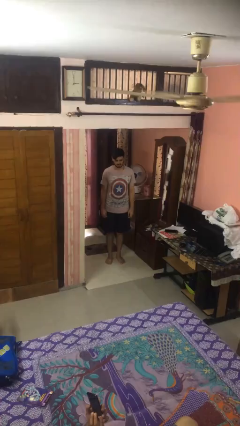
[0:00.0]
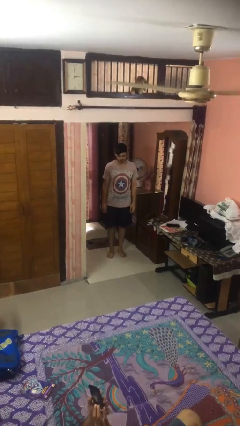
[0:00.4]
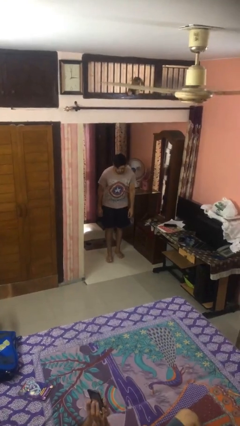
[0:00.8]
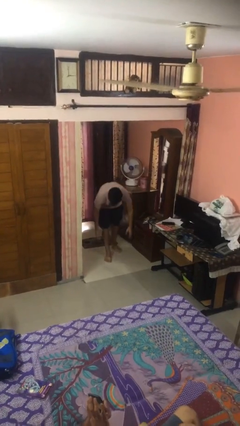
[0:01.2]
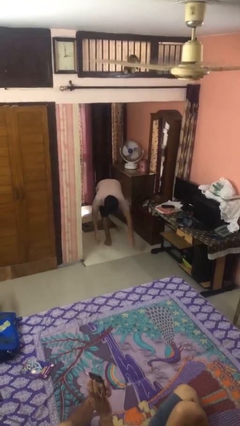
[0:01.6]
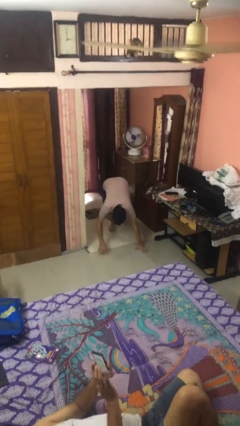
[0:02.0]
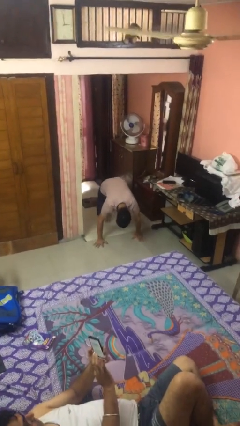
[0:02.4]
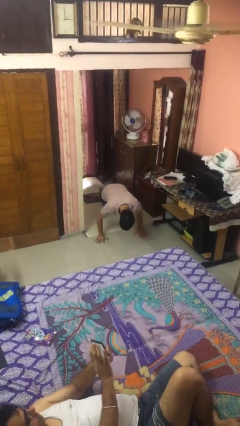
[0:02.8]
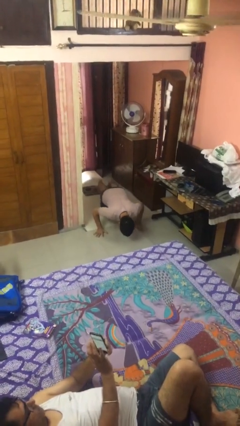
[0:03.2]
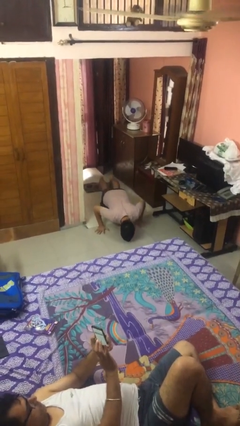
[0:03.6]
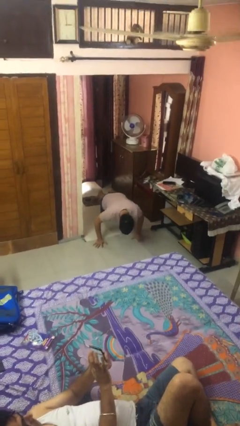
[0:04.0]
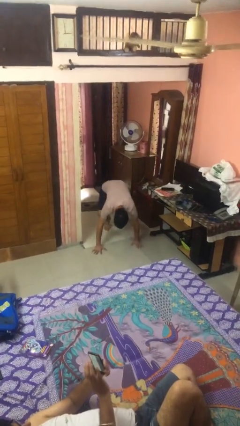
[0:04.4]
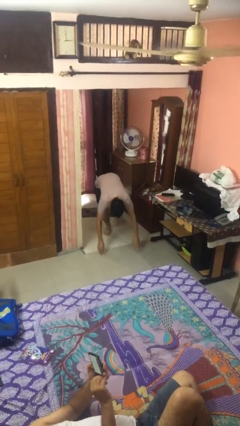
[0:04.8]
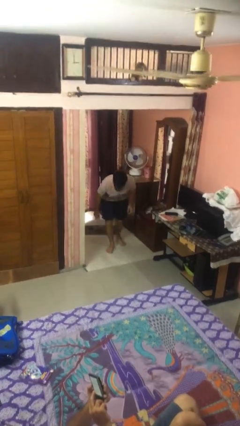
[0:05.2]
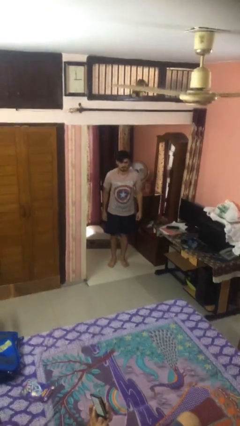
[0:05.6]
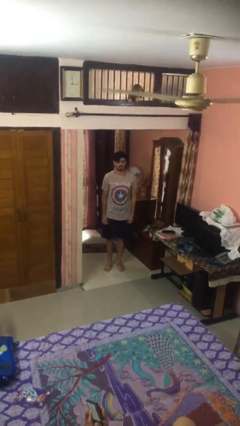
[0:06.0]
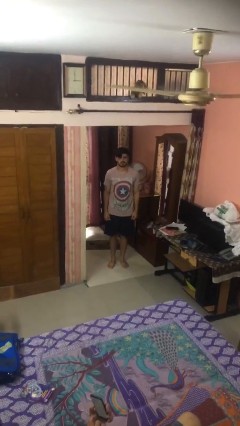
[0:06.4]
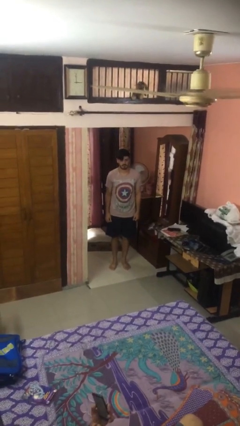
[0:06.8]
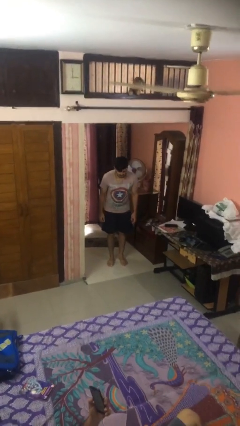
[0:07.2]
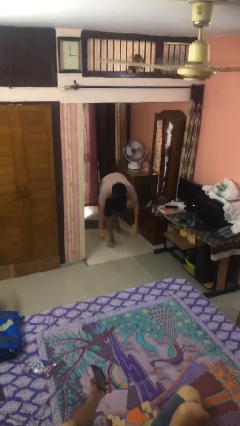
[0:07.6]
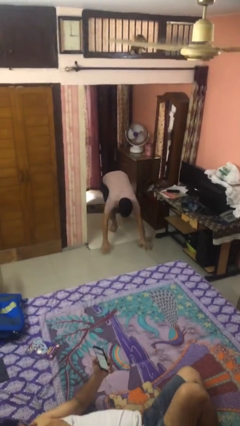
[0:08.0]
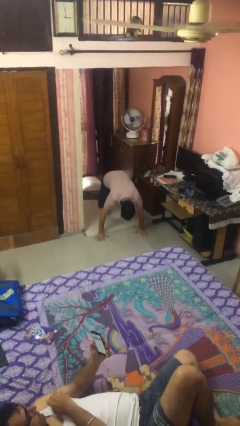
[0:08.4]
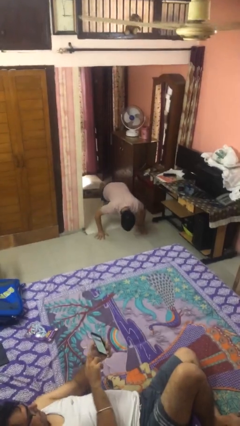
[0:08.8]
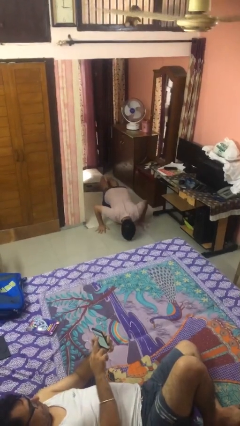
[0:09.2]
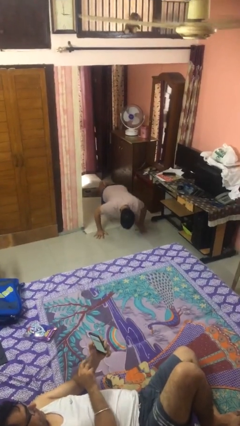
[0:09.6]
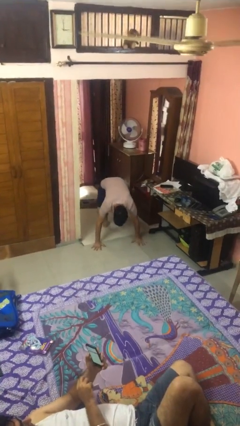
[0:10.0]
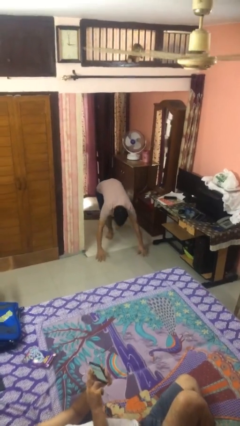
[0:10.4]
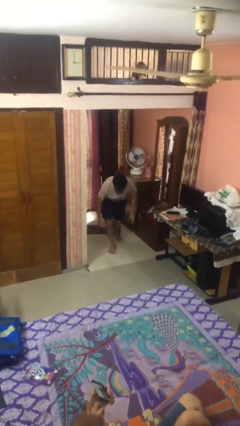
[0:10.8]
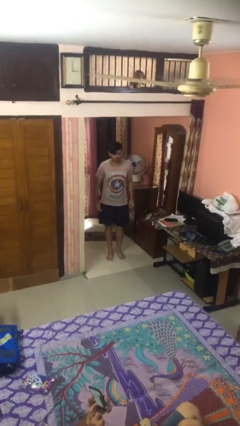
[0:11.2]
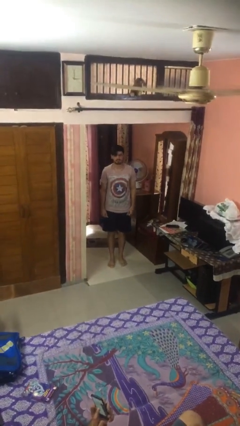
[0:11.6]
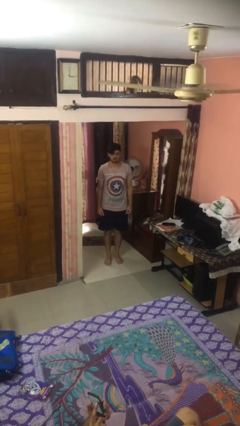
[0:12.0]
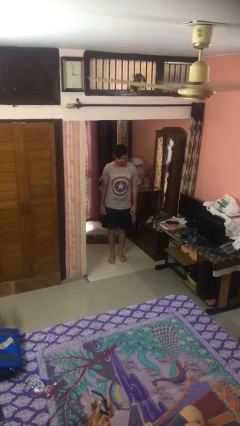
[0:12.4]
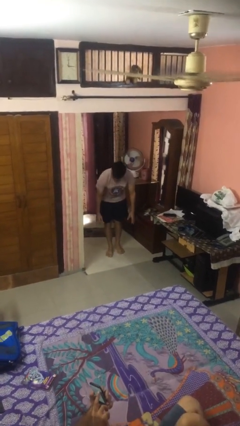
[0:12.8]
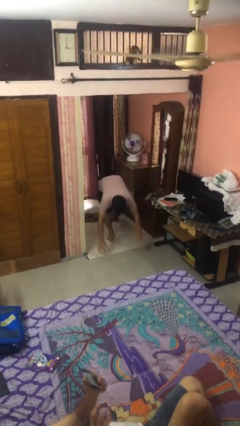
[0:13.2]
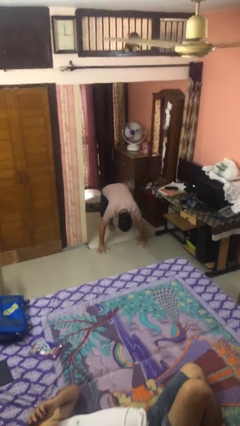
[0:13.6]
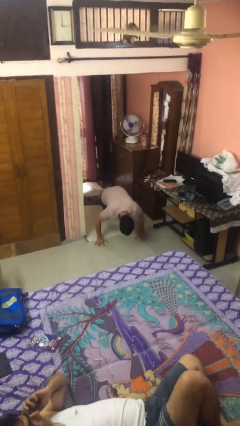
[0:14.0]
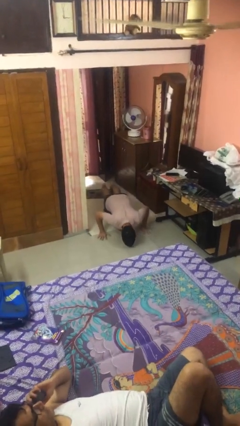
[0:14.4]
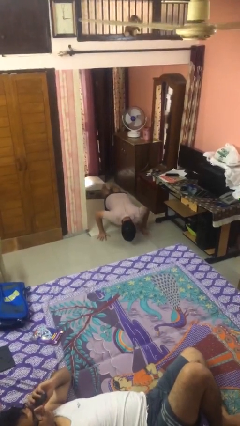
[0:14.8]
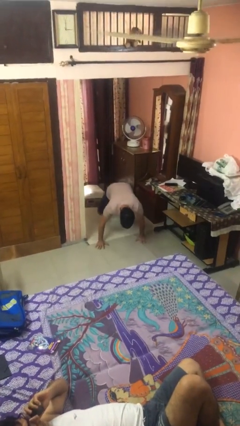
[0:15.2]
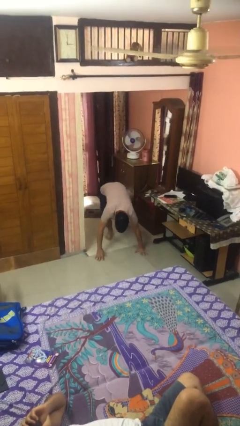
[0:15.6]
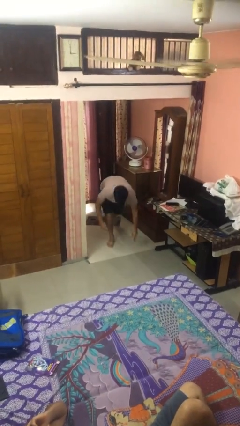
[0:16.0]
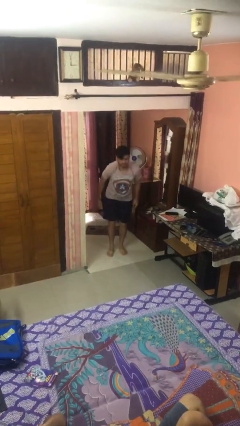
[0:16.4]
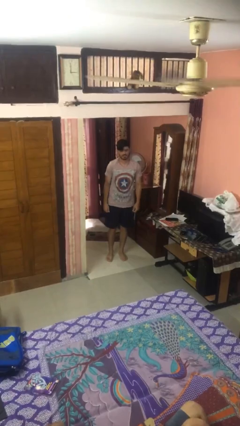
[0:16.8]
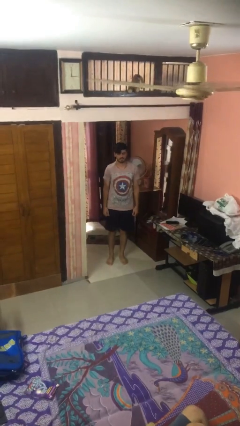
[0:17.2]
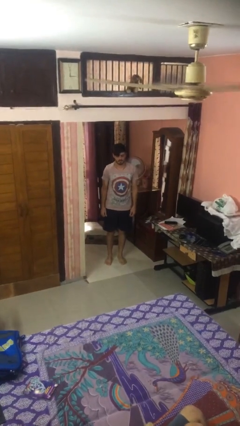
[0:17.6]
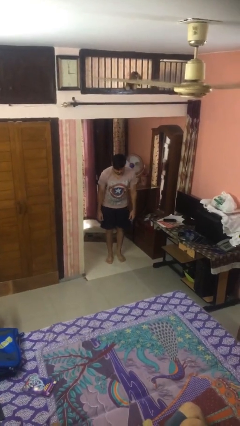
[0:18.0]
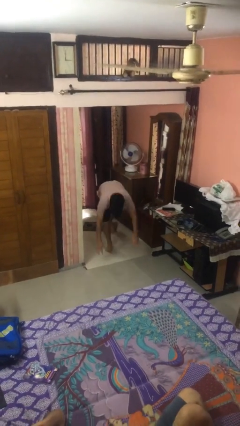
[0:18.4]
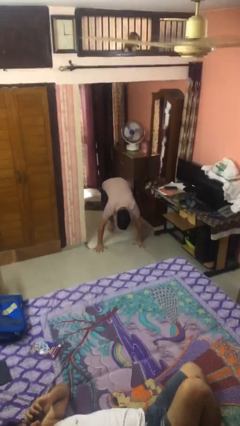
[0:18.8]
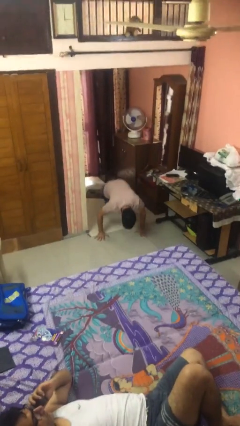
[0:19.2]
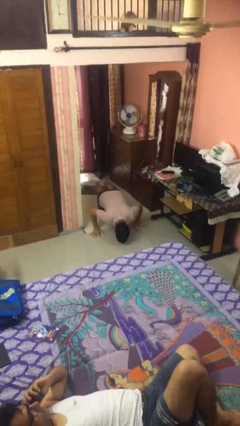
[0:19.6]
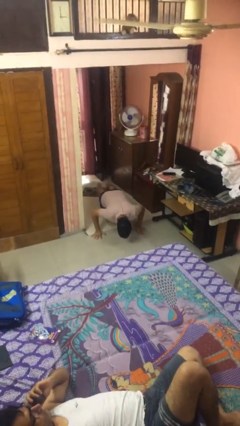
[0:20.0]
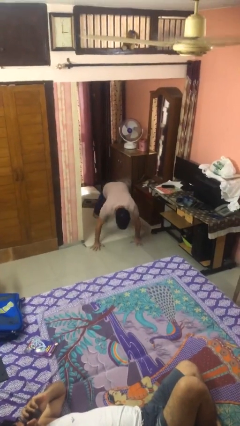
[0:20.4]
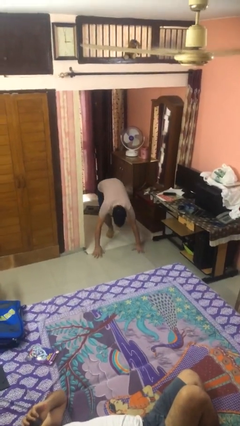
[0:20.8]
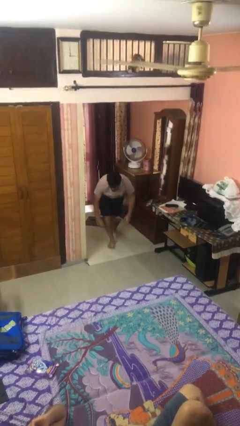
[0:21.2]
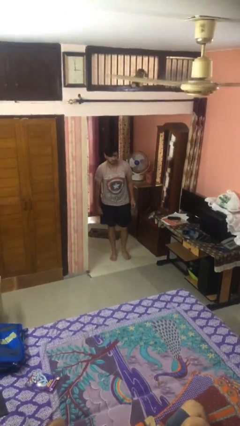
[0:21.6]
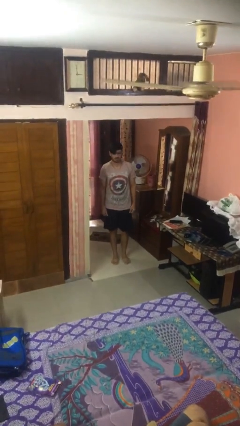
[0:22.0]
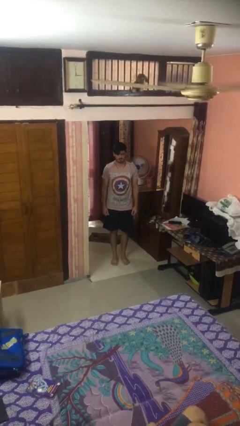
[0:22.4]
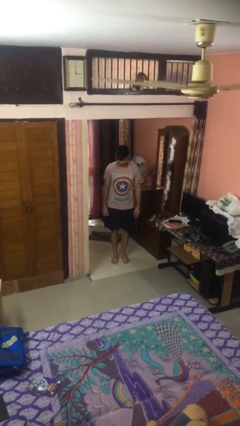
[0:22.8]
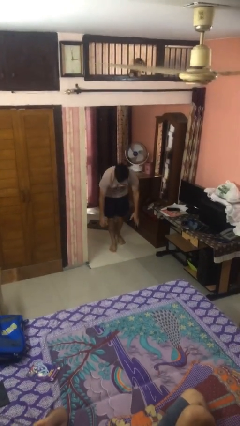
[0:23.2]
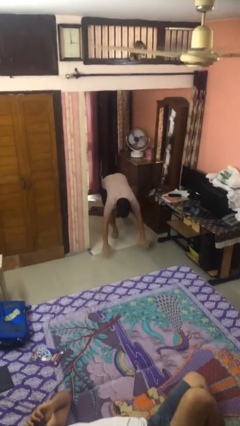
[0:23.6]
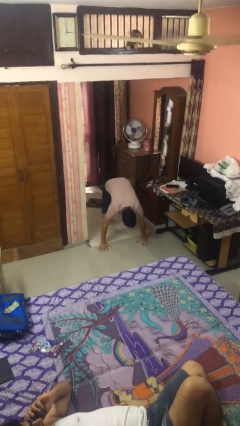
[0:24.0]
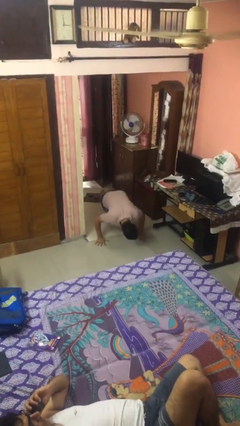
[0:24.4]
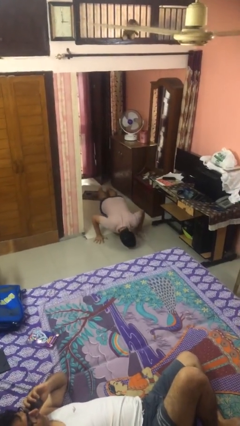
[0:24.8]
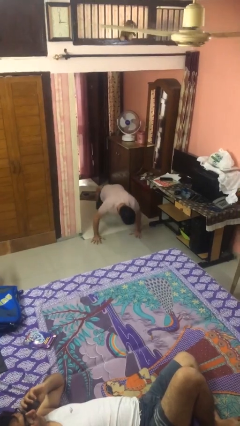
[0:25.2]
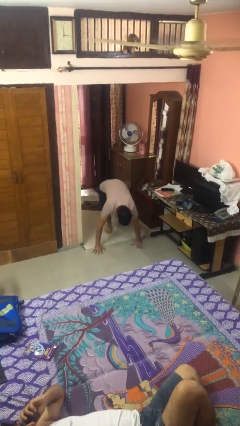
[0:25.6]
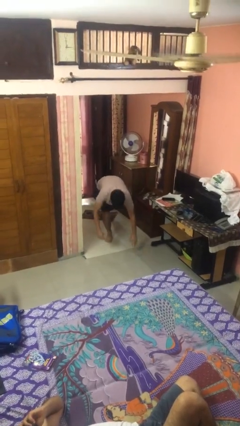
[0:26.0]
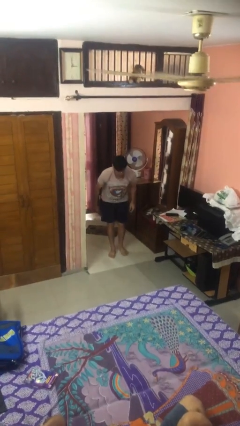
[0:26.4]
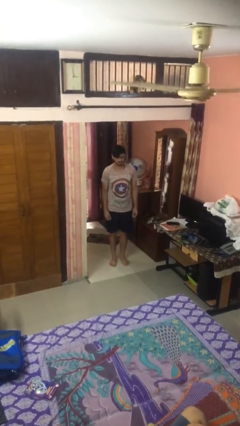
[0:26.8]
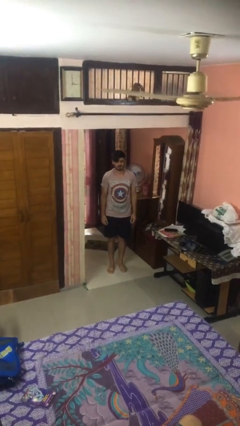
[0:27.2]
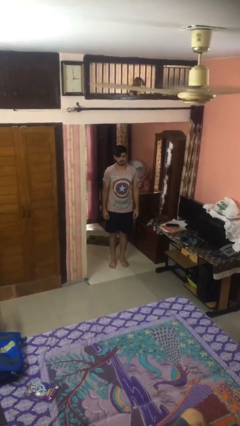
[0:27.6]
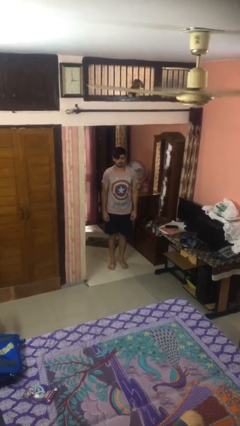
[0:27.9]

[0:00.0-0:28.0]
person exercises with pushup

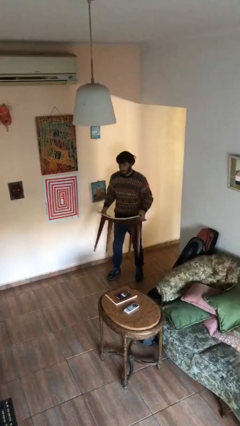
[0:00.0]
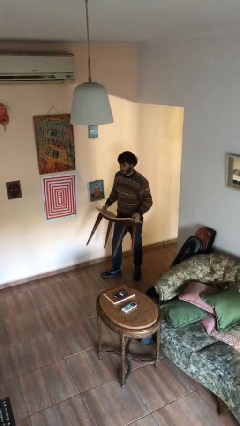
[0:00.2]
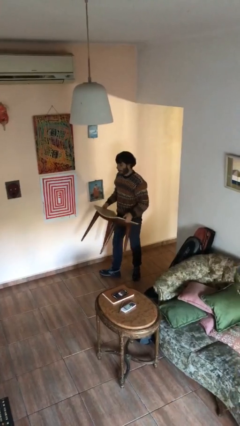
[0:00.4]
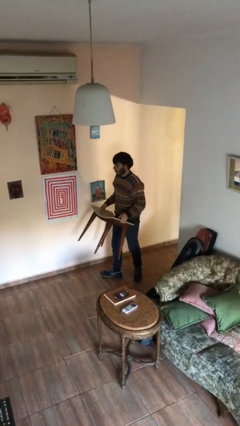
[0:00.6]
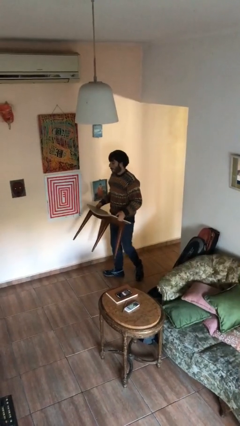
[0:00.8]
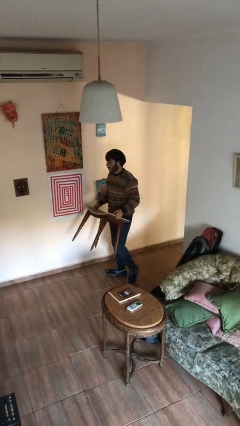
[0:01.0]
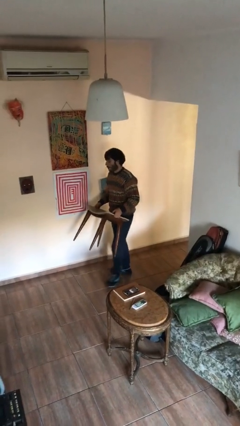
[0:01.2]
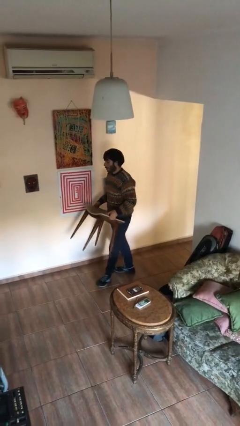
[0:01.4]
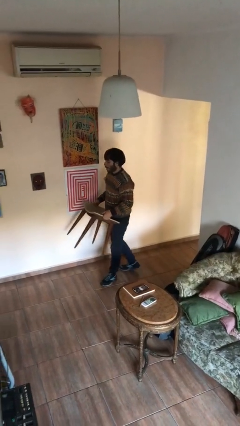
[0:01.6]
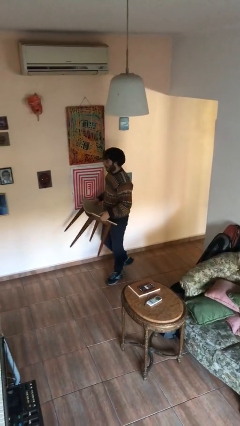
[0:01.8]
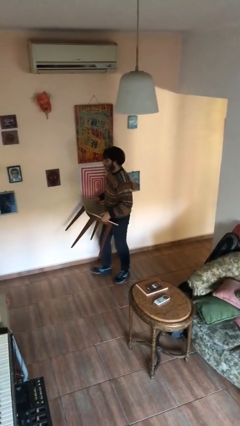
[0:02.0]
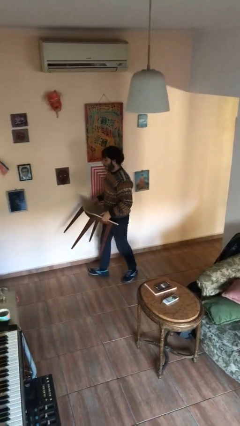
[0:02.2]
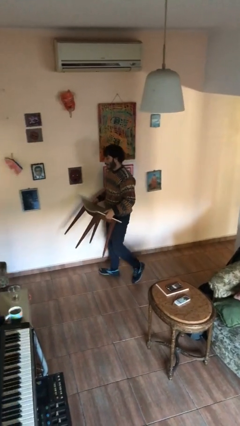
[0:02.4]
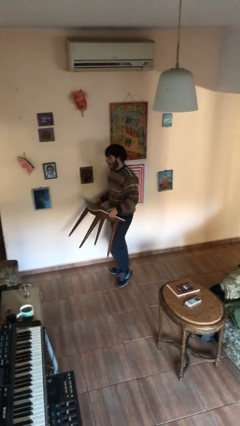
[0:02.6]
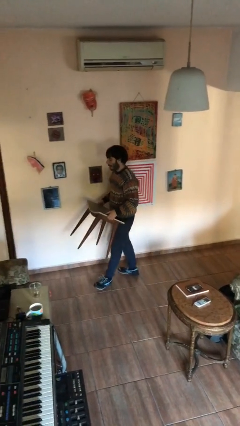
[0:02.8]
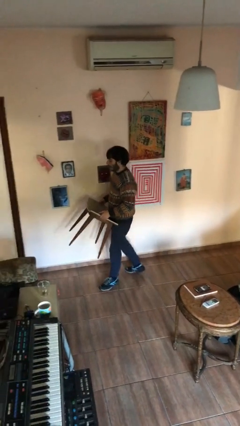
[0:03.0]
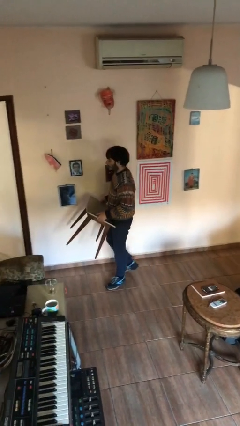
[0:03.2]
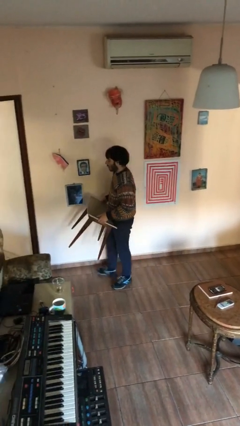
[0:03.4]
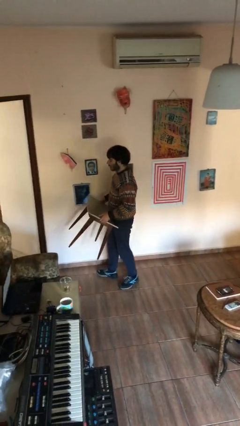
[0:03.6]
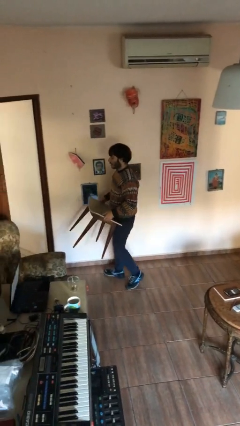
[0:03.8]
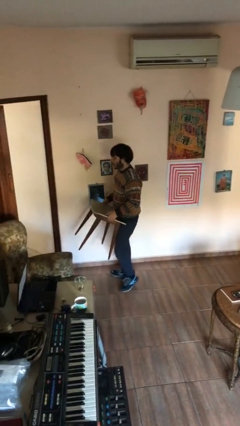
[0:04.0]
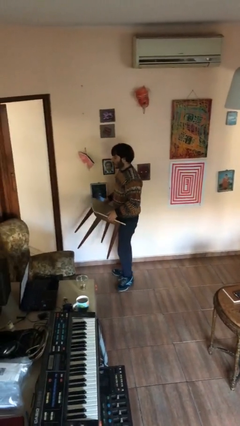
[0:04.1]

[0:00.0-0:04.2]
person carries furniture
